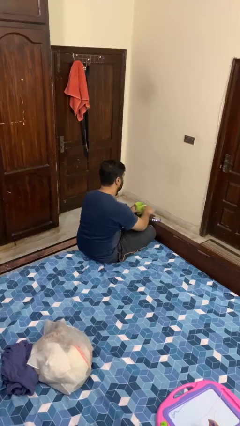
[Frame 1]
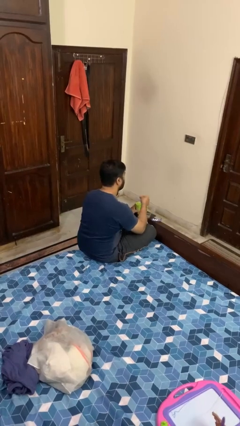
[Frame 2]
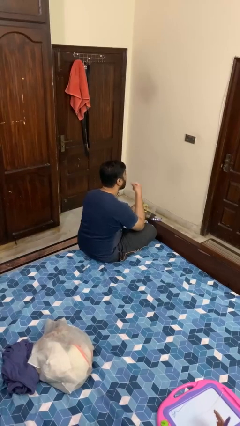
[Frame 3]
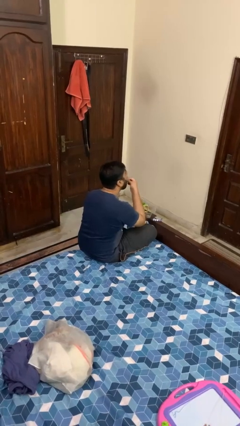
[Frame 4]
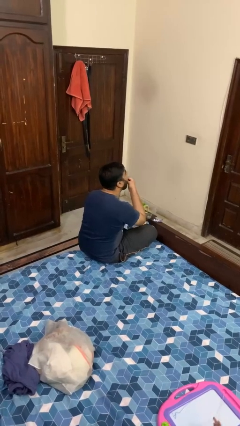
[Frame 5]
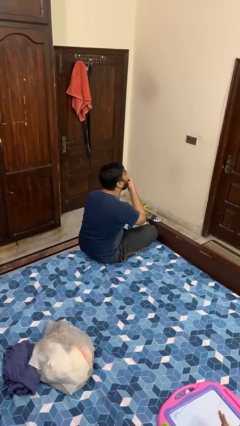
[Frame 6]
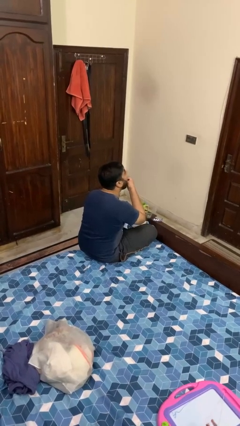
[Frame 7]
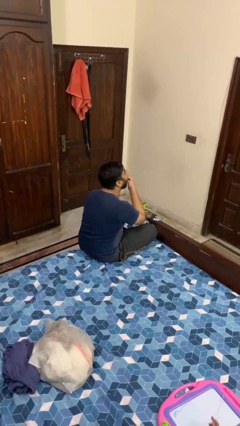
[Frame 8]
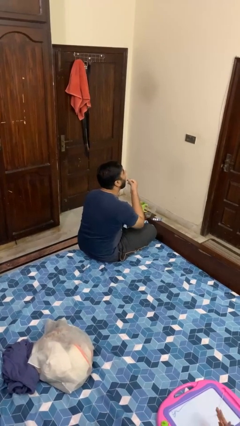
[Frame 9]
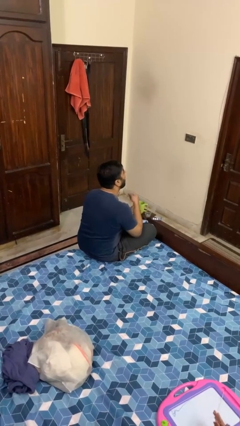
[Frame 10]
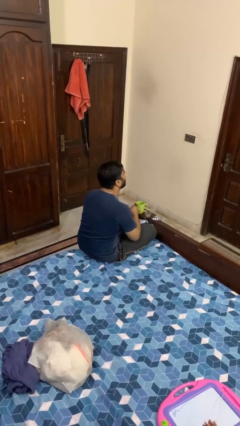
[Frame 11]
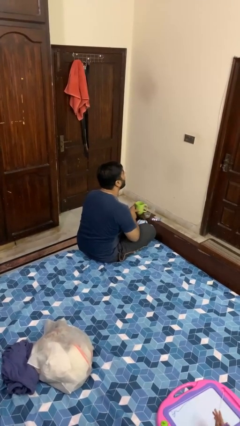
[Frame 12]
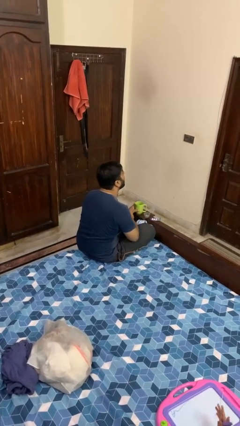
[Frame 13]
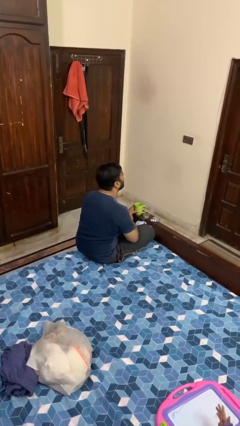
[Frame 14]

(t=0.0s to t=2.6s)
person takes medicine pills

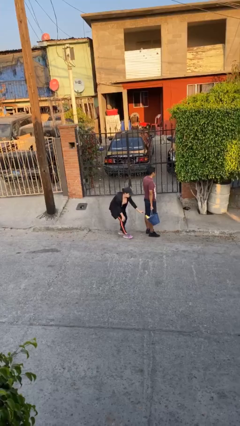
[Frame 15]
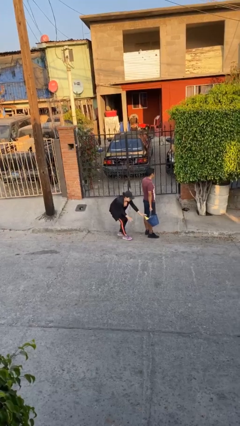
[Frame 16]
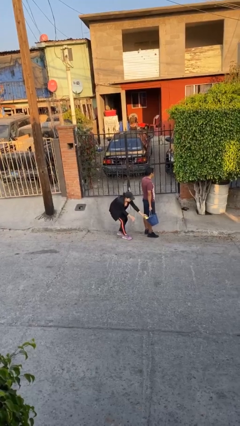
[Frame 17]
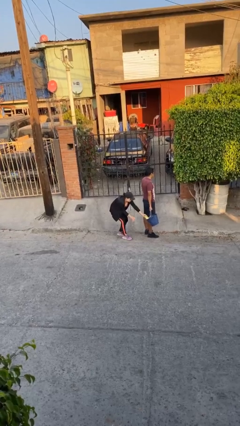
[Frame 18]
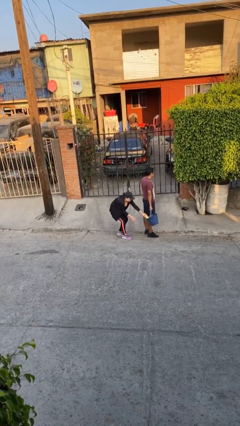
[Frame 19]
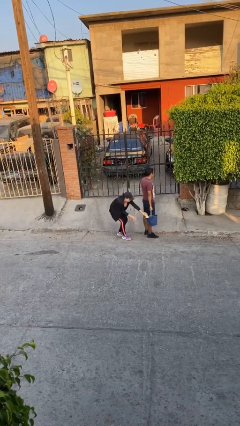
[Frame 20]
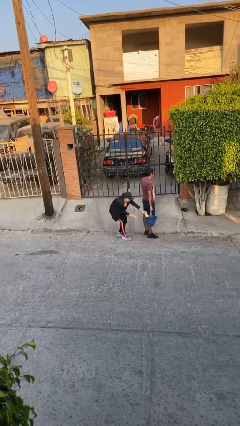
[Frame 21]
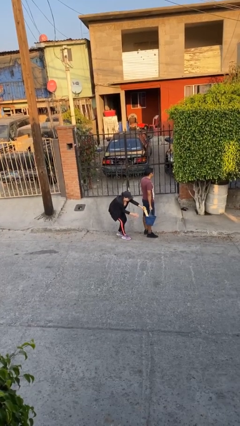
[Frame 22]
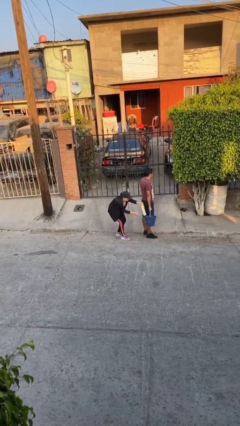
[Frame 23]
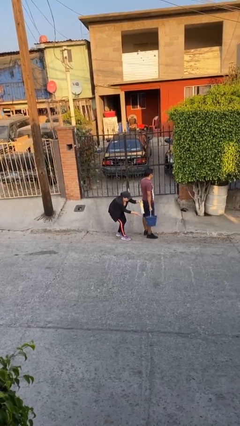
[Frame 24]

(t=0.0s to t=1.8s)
person steals object from person

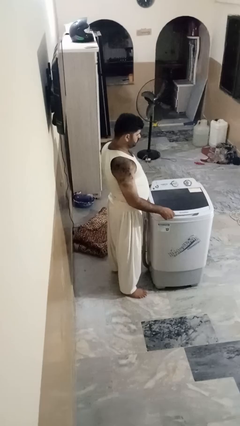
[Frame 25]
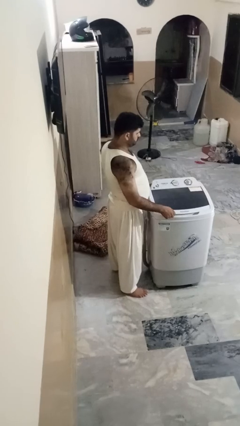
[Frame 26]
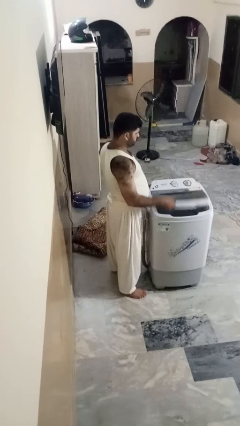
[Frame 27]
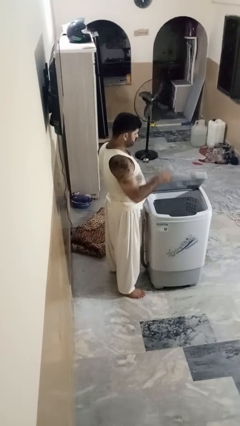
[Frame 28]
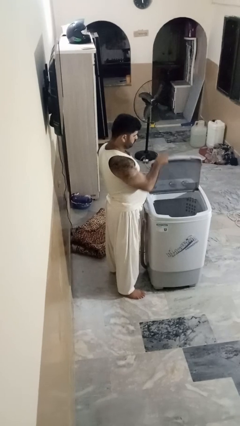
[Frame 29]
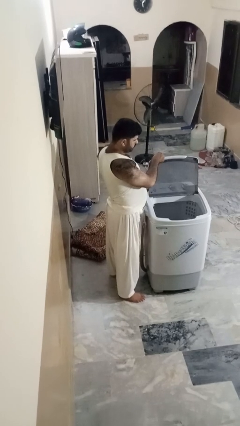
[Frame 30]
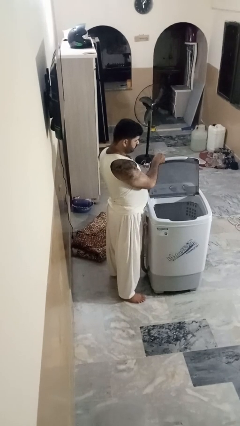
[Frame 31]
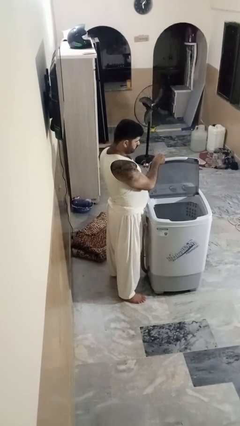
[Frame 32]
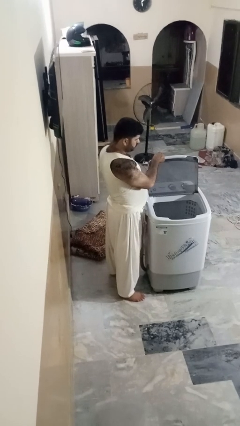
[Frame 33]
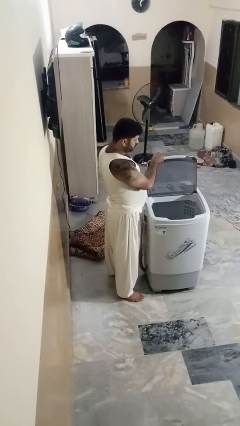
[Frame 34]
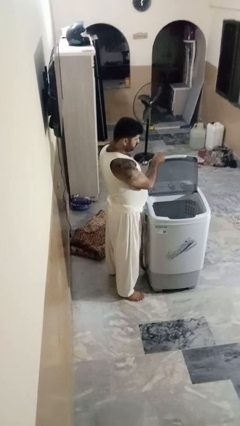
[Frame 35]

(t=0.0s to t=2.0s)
person opens clothes washer

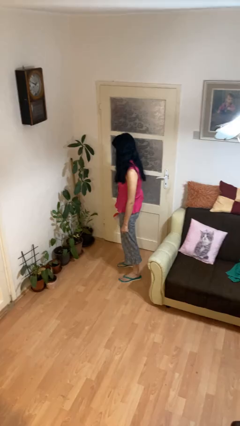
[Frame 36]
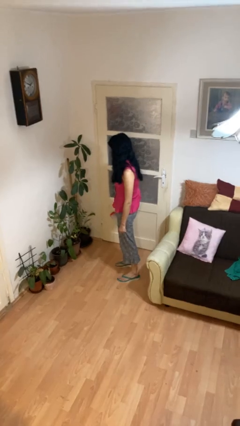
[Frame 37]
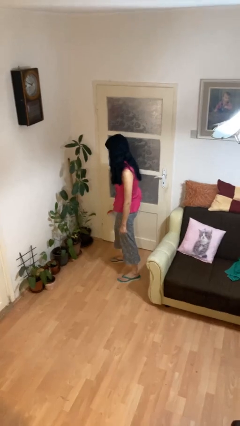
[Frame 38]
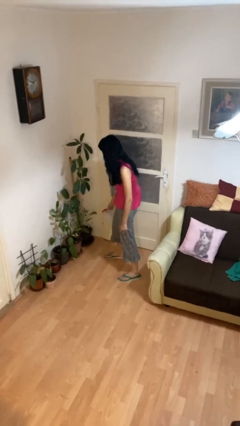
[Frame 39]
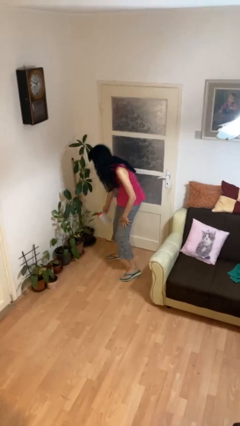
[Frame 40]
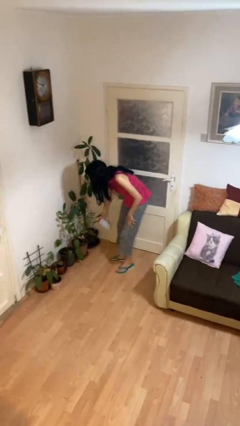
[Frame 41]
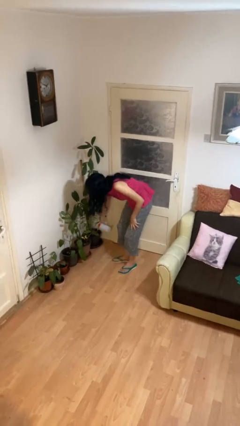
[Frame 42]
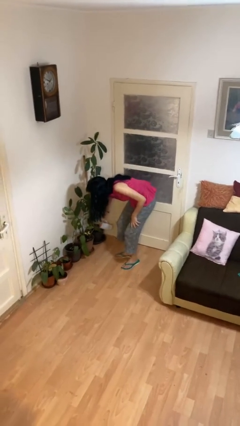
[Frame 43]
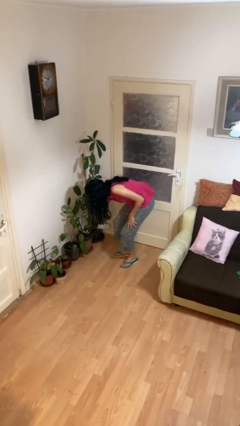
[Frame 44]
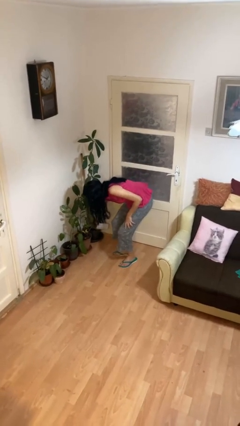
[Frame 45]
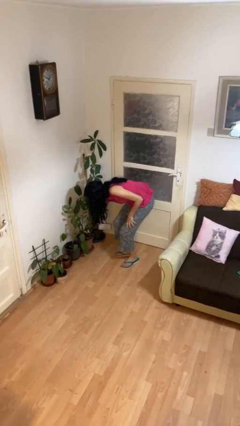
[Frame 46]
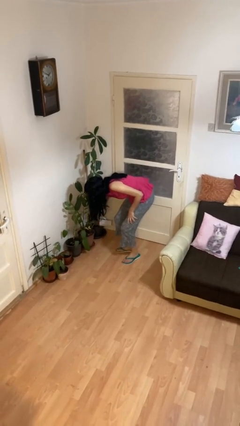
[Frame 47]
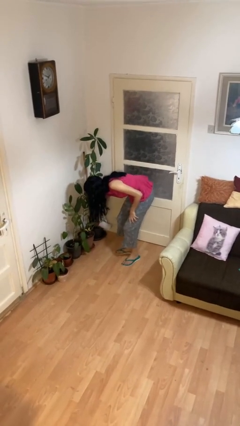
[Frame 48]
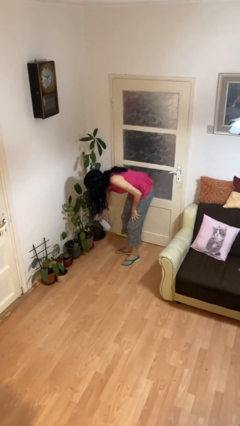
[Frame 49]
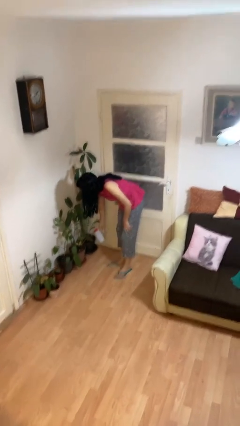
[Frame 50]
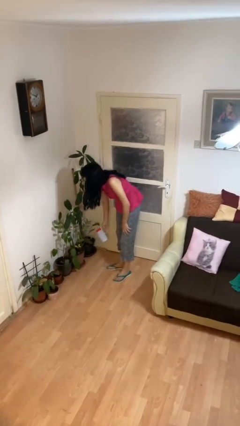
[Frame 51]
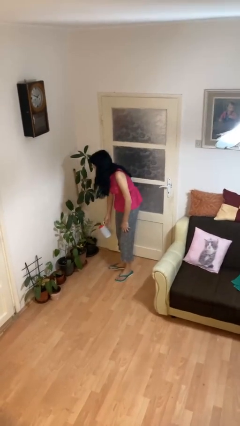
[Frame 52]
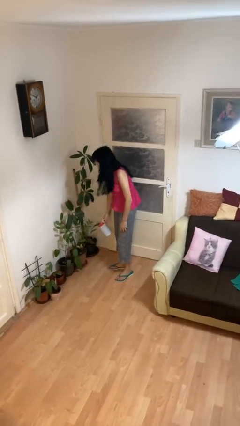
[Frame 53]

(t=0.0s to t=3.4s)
person waters houseplant

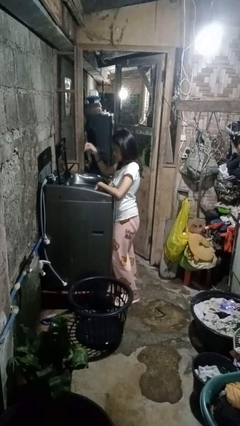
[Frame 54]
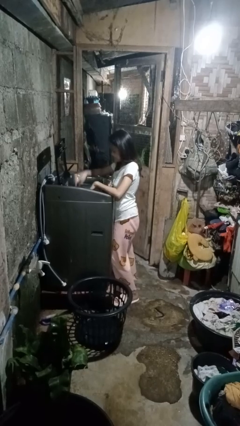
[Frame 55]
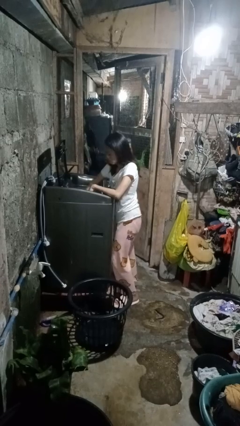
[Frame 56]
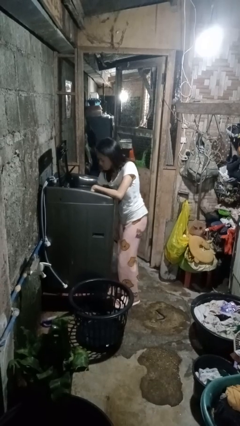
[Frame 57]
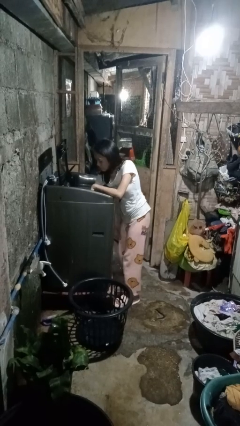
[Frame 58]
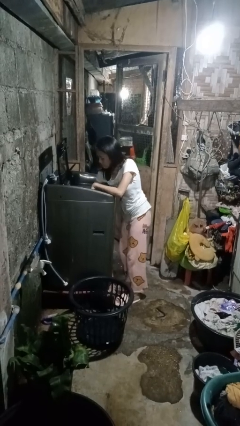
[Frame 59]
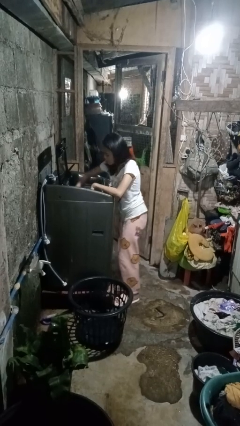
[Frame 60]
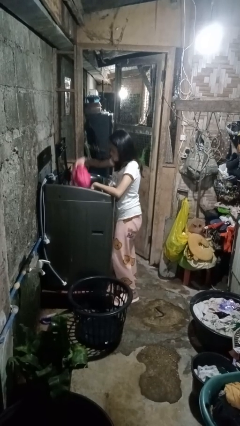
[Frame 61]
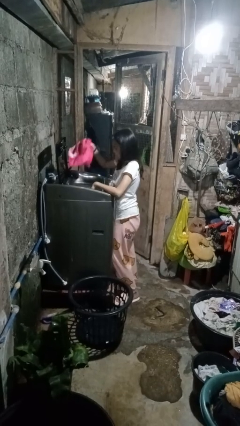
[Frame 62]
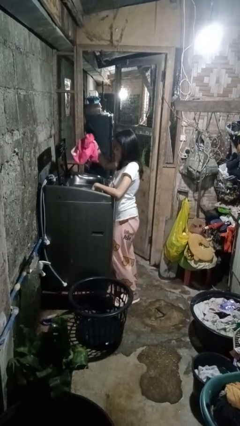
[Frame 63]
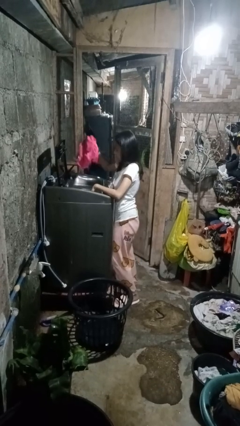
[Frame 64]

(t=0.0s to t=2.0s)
person unloads clotheswasher

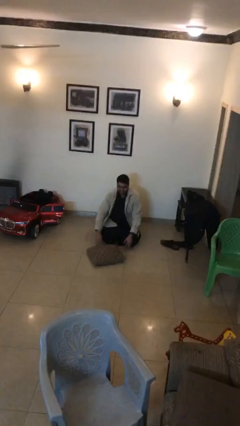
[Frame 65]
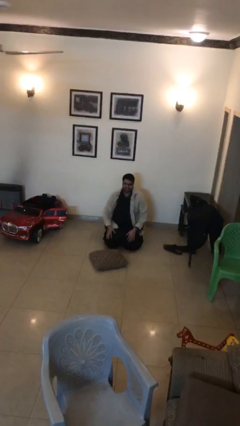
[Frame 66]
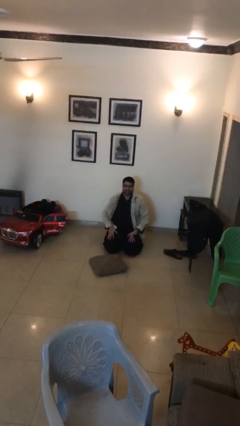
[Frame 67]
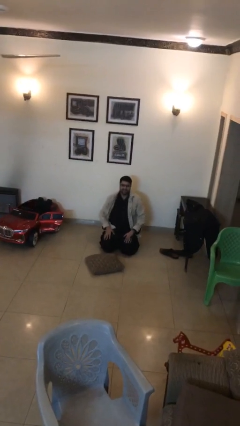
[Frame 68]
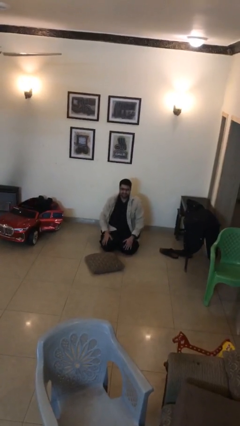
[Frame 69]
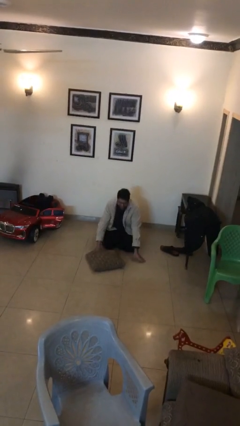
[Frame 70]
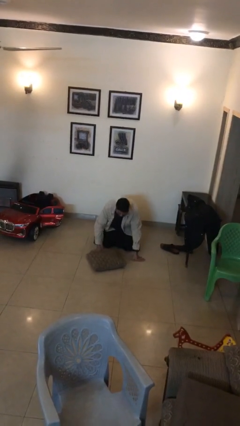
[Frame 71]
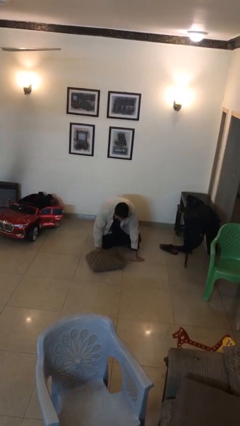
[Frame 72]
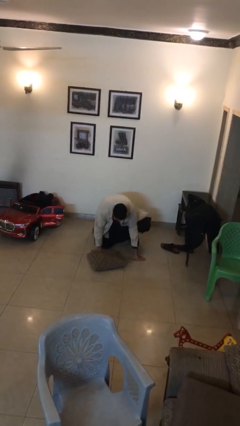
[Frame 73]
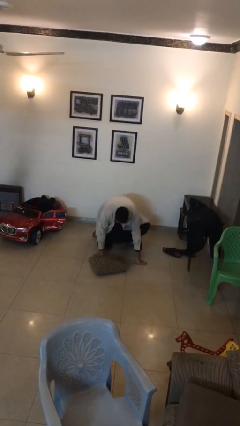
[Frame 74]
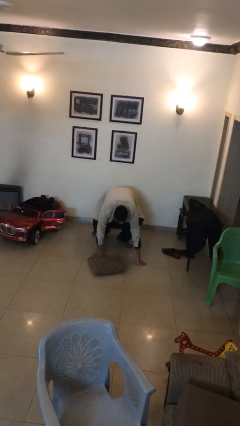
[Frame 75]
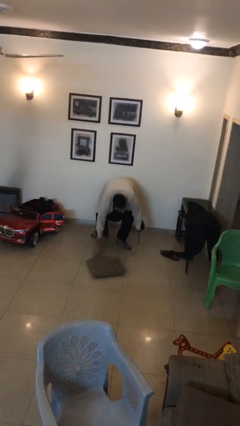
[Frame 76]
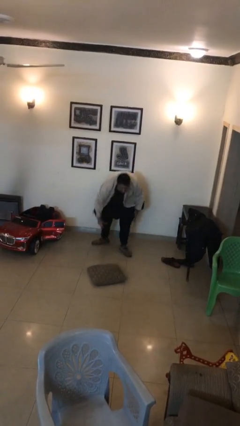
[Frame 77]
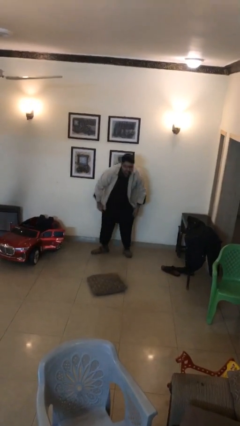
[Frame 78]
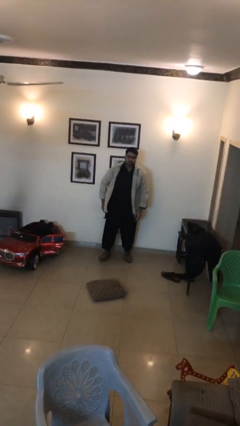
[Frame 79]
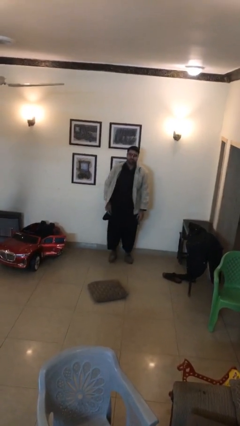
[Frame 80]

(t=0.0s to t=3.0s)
person stands up

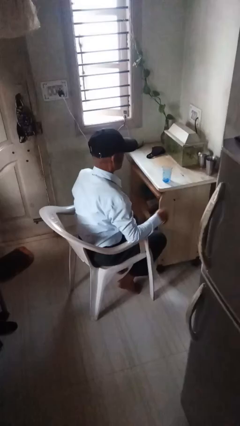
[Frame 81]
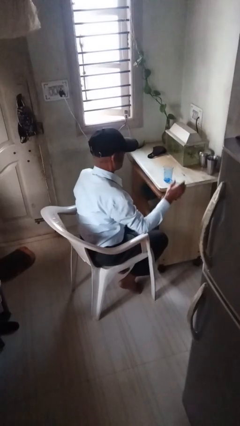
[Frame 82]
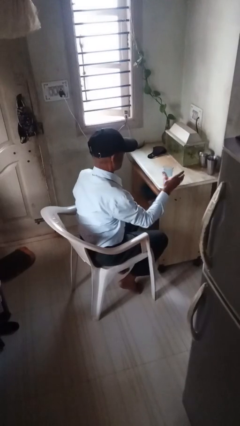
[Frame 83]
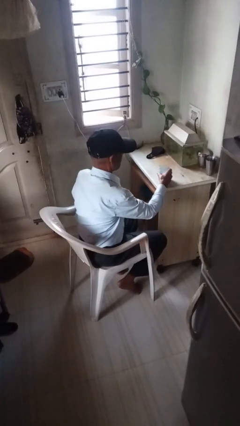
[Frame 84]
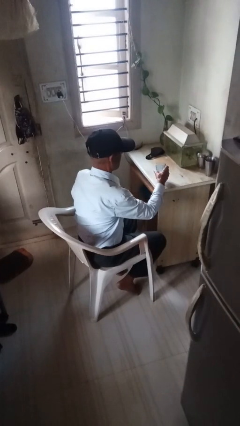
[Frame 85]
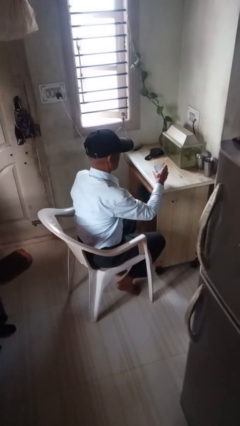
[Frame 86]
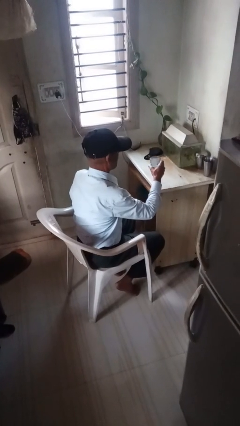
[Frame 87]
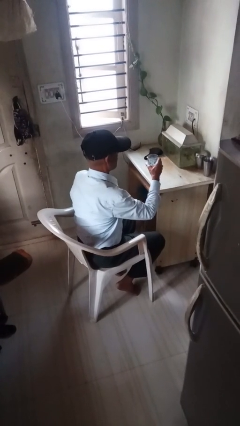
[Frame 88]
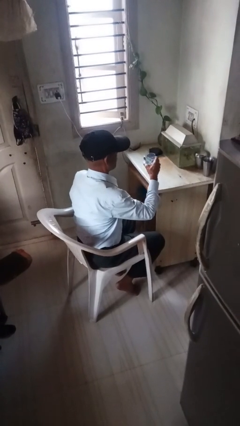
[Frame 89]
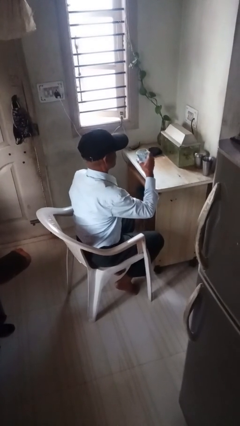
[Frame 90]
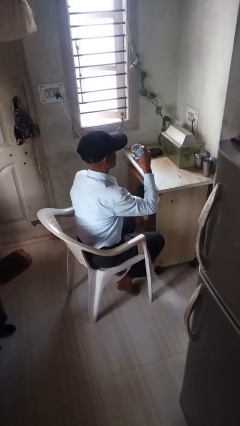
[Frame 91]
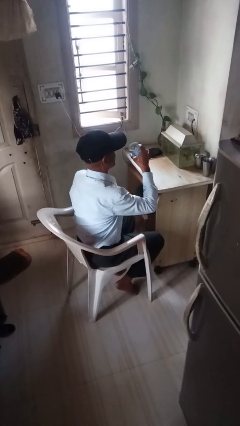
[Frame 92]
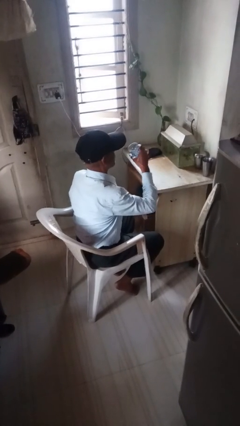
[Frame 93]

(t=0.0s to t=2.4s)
person picks up object from table

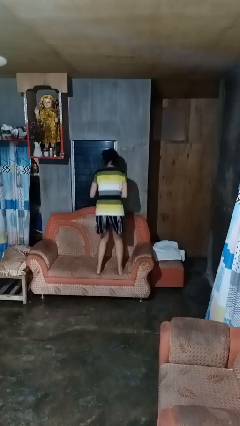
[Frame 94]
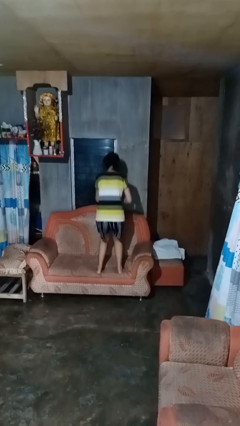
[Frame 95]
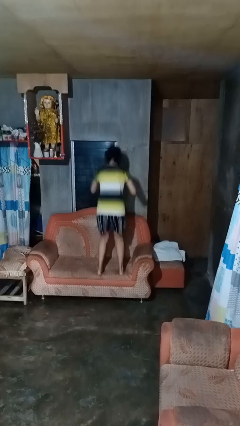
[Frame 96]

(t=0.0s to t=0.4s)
person jumps on couch
